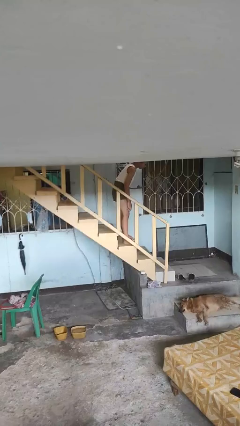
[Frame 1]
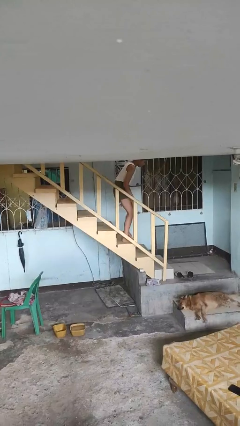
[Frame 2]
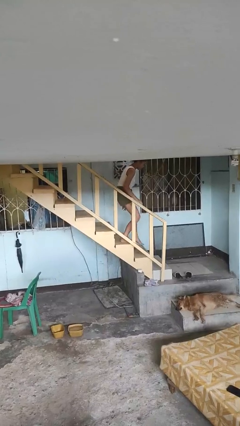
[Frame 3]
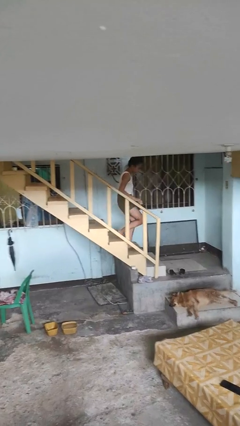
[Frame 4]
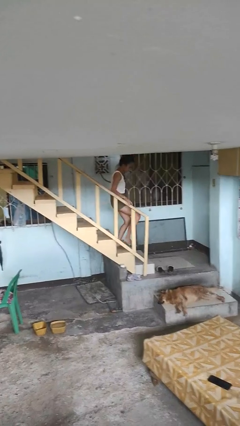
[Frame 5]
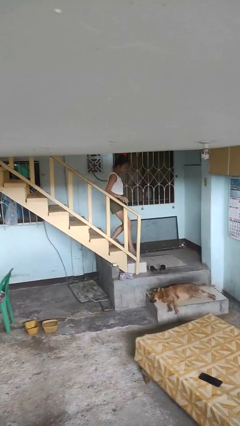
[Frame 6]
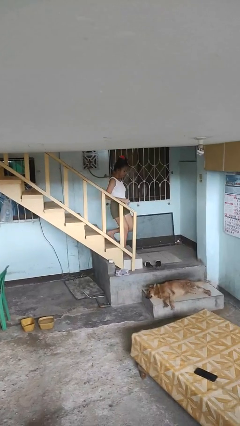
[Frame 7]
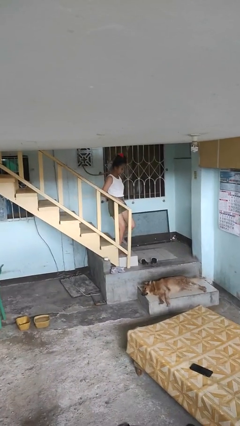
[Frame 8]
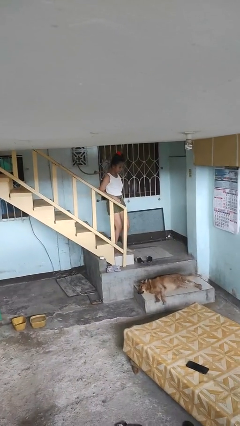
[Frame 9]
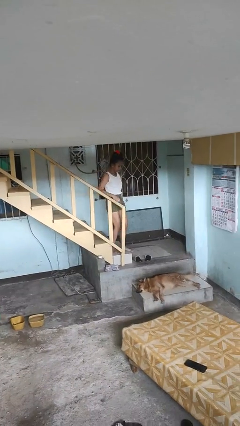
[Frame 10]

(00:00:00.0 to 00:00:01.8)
person climbs down stairs

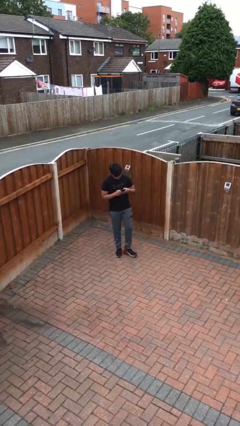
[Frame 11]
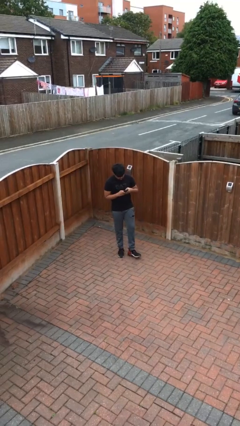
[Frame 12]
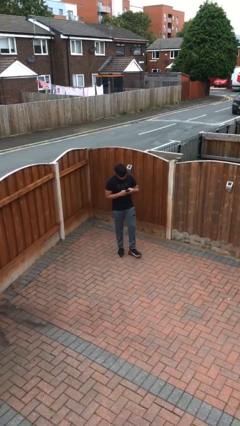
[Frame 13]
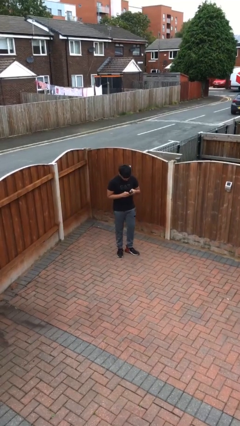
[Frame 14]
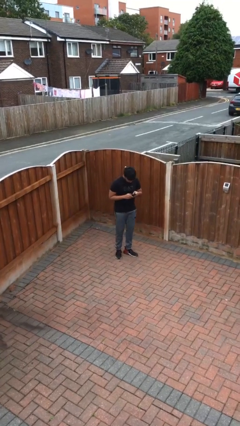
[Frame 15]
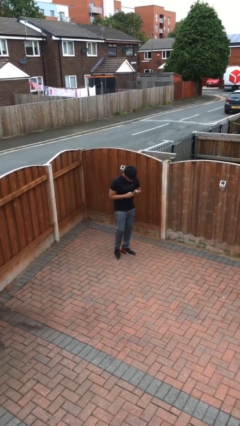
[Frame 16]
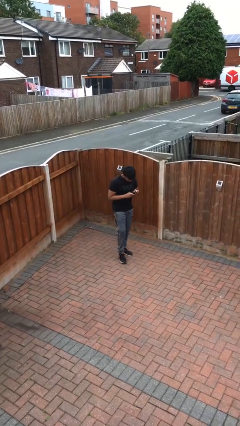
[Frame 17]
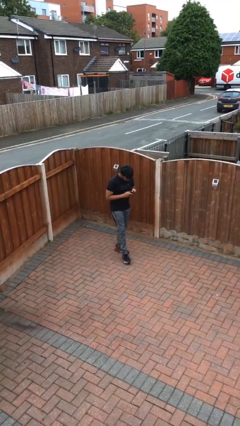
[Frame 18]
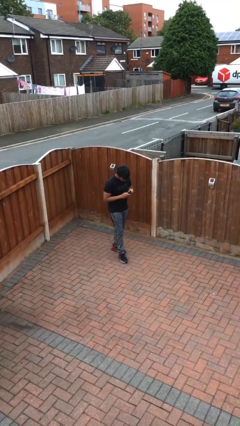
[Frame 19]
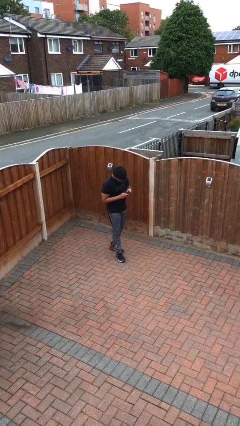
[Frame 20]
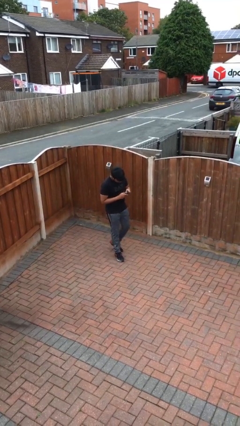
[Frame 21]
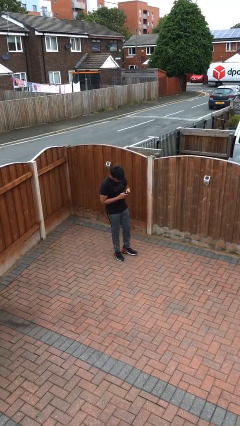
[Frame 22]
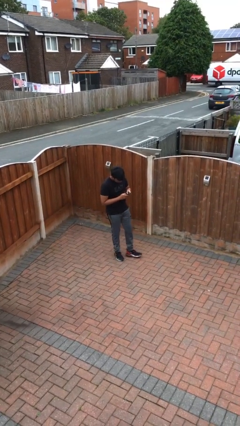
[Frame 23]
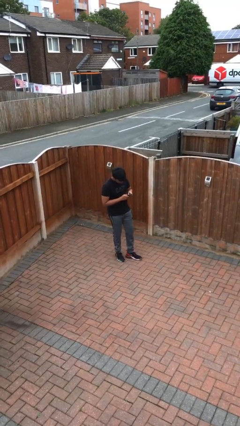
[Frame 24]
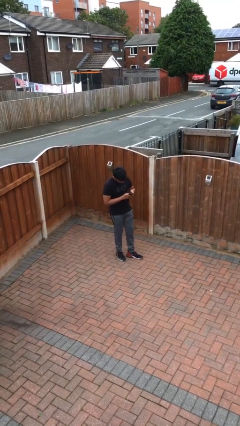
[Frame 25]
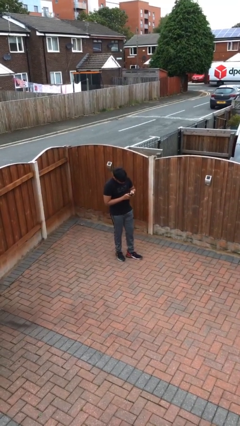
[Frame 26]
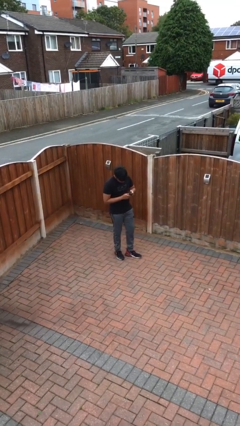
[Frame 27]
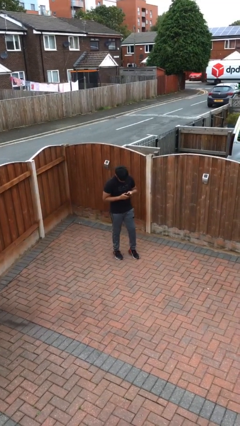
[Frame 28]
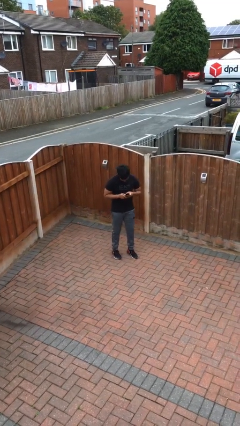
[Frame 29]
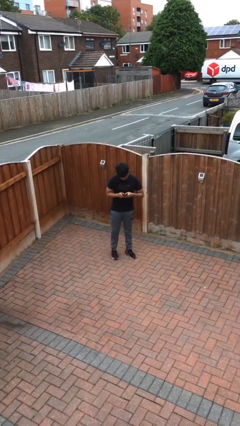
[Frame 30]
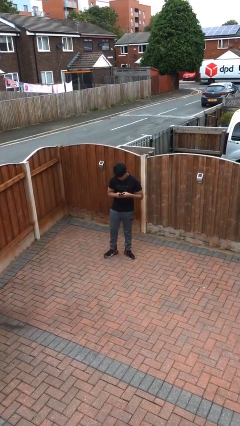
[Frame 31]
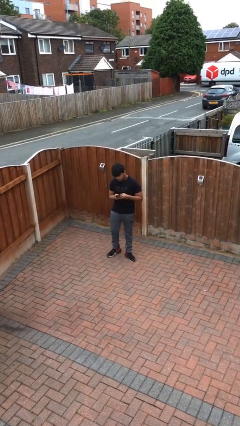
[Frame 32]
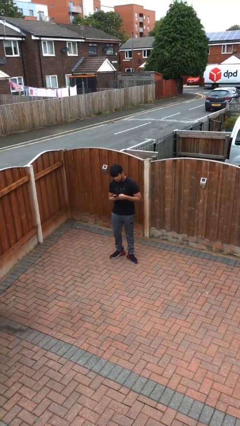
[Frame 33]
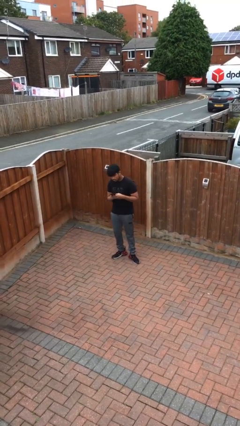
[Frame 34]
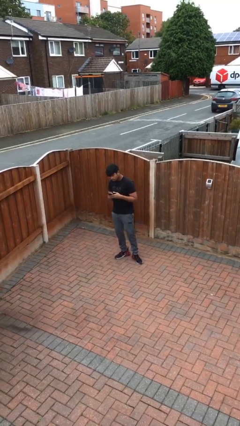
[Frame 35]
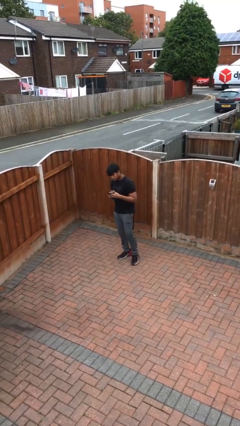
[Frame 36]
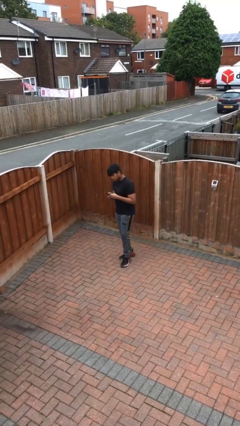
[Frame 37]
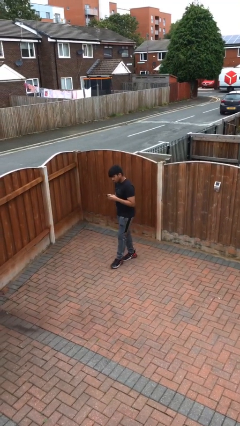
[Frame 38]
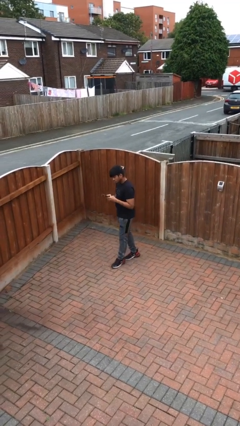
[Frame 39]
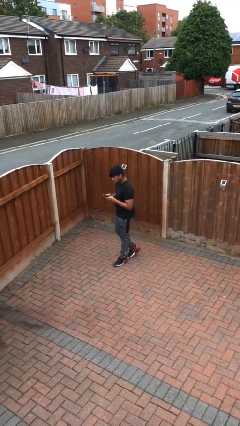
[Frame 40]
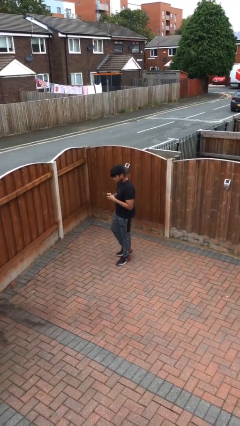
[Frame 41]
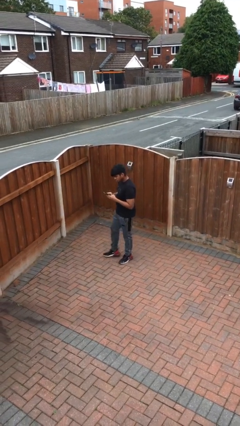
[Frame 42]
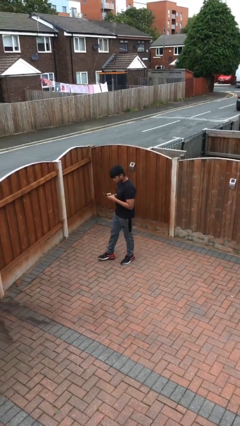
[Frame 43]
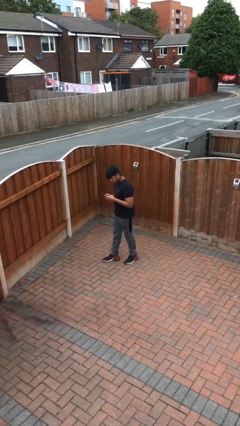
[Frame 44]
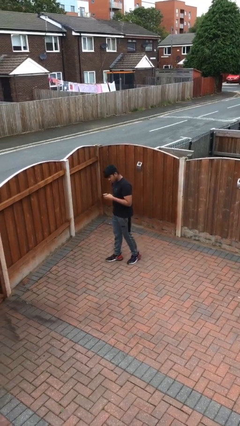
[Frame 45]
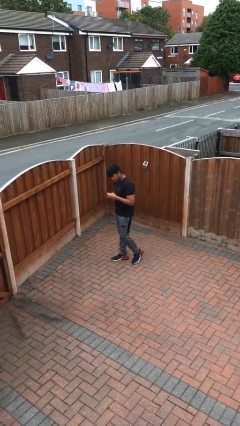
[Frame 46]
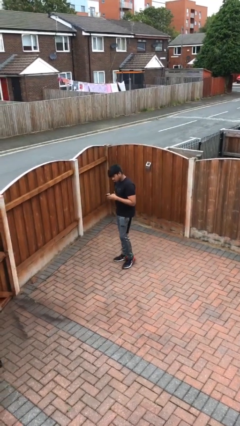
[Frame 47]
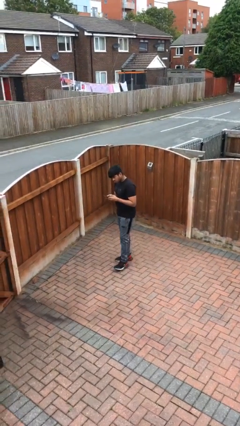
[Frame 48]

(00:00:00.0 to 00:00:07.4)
person texts on phone

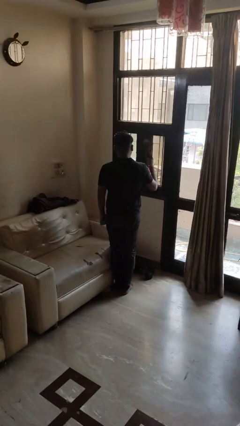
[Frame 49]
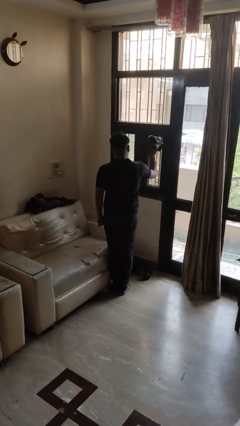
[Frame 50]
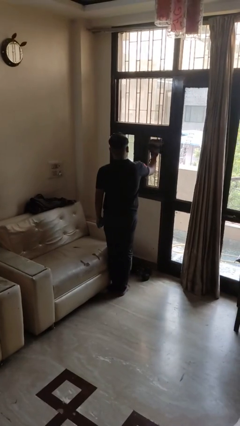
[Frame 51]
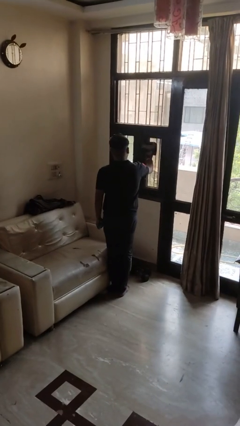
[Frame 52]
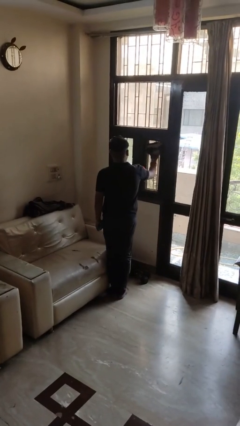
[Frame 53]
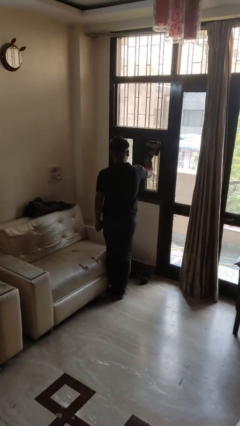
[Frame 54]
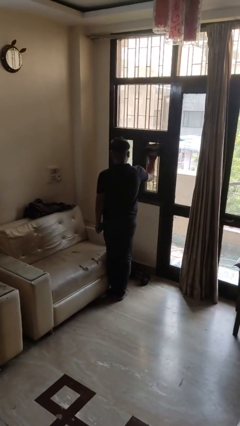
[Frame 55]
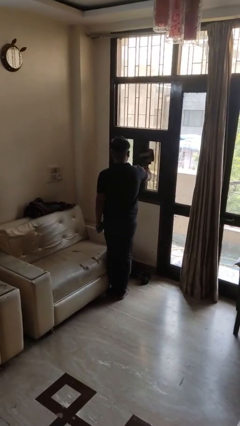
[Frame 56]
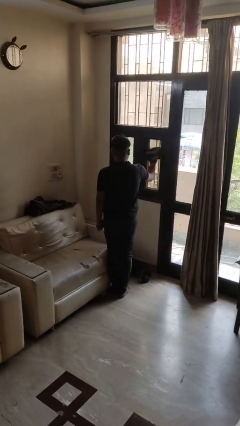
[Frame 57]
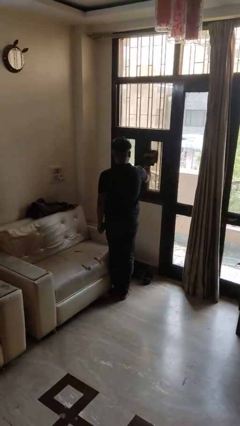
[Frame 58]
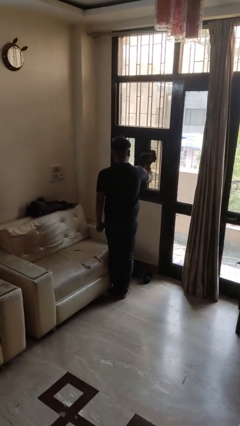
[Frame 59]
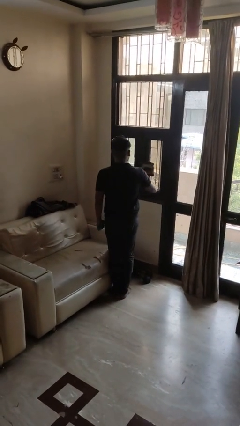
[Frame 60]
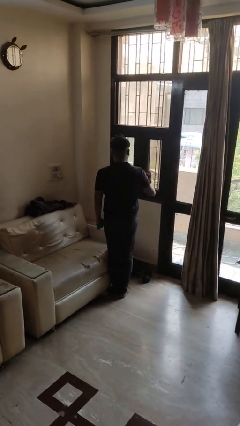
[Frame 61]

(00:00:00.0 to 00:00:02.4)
person washes window

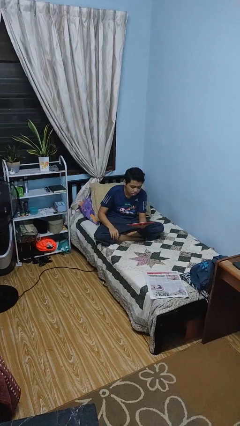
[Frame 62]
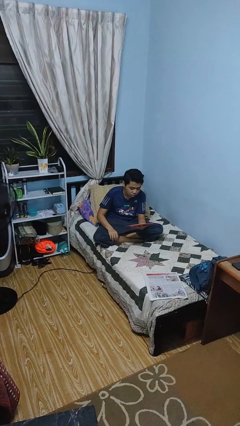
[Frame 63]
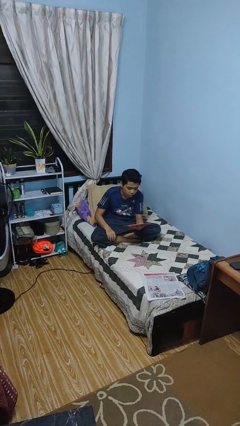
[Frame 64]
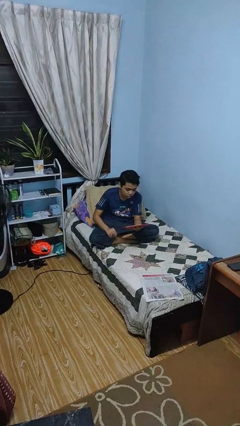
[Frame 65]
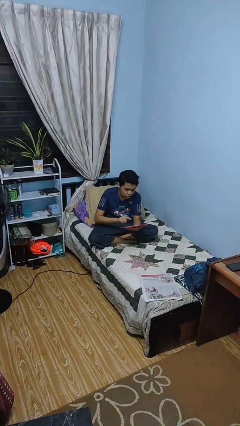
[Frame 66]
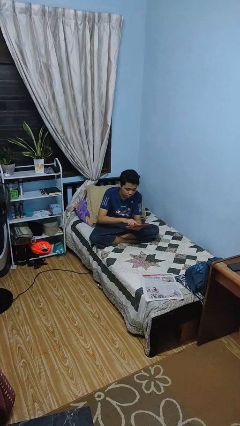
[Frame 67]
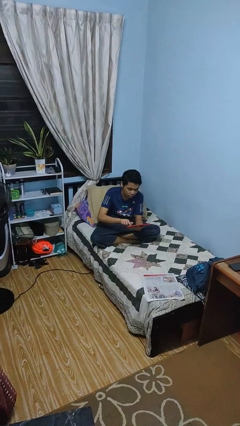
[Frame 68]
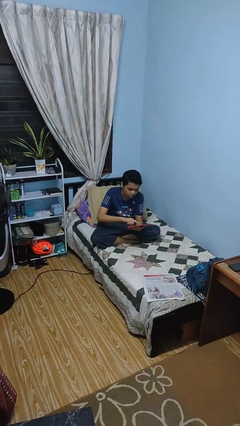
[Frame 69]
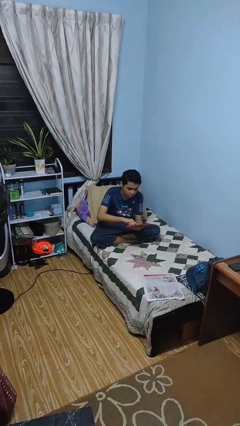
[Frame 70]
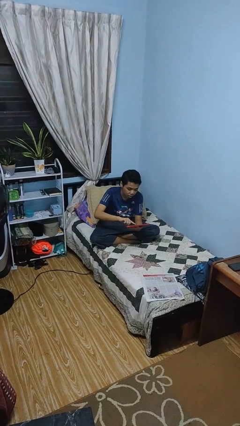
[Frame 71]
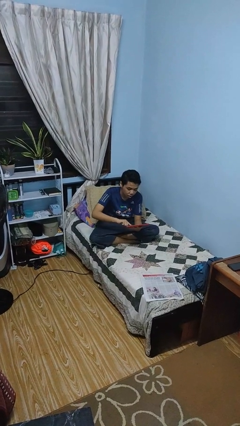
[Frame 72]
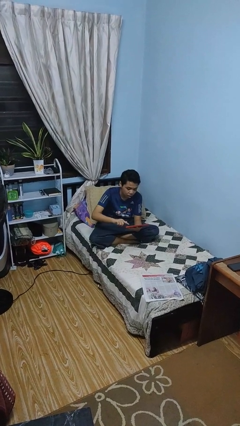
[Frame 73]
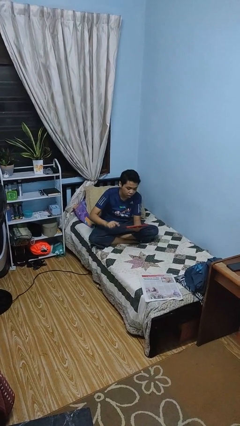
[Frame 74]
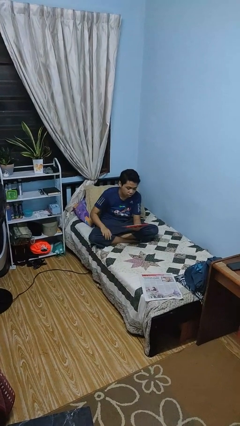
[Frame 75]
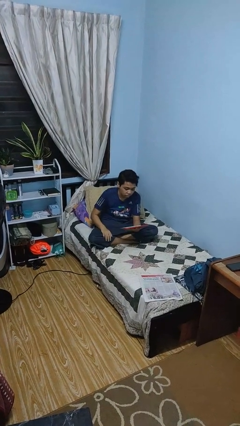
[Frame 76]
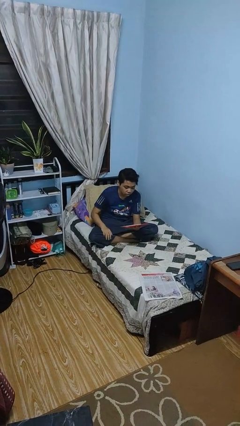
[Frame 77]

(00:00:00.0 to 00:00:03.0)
person interacts with tablet

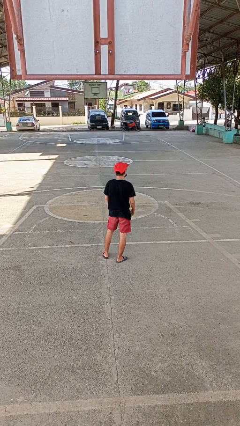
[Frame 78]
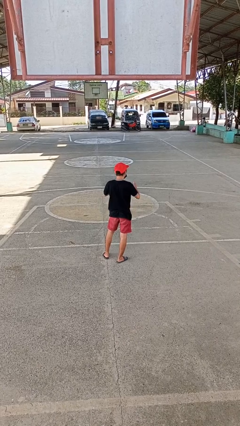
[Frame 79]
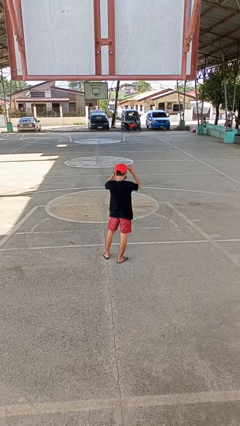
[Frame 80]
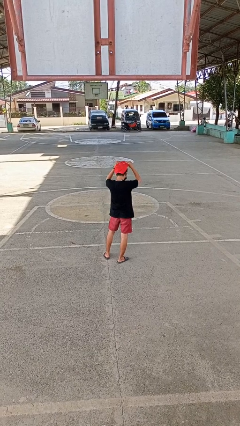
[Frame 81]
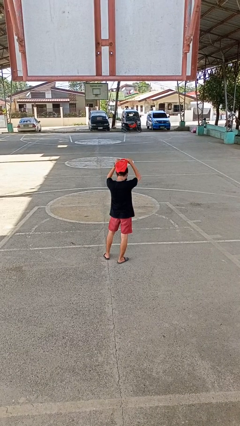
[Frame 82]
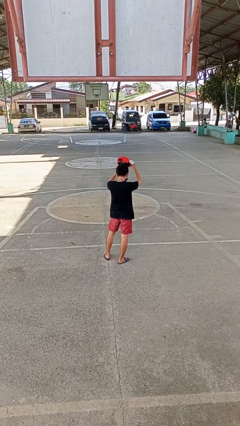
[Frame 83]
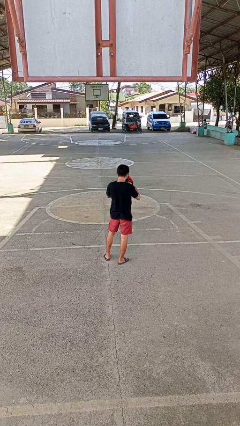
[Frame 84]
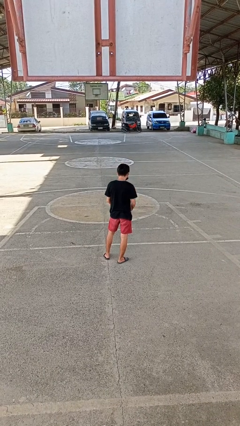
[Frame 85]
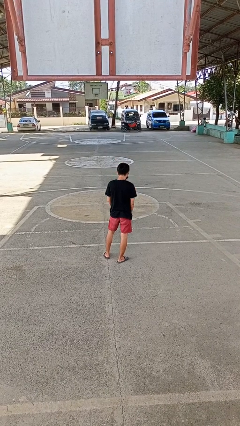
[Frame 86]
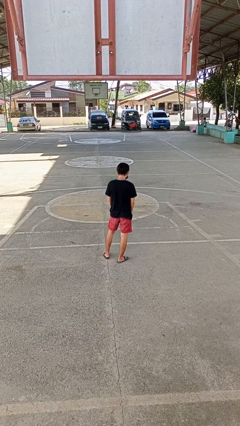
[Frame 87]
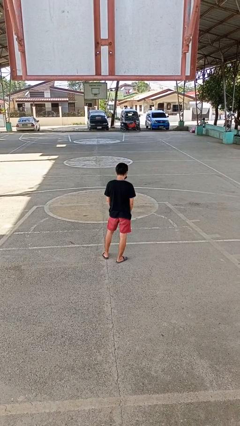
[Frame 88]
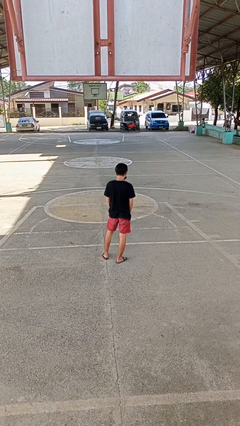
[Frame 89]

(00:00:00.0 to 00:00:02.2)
person takes off hat

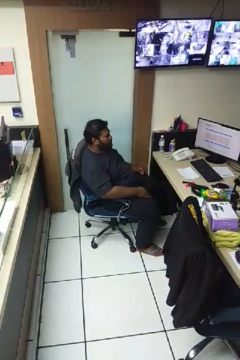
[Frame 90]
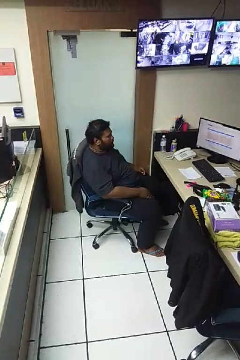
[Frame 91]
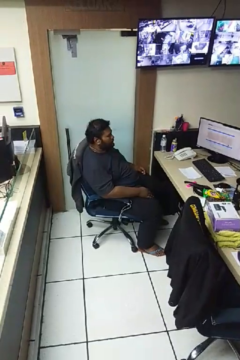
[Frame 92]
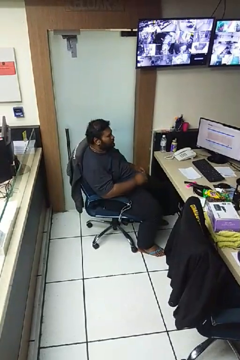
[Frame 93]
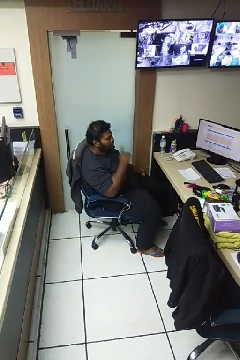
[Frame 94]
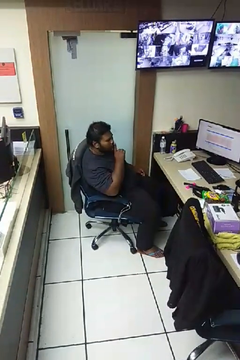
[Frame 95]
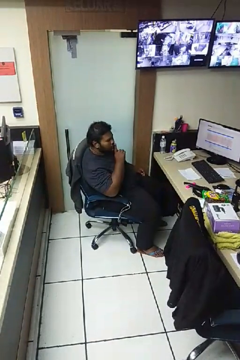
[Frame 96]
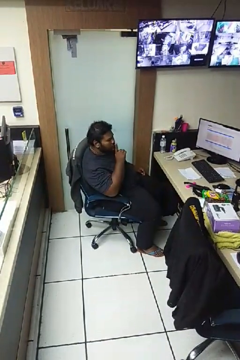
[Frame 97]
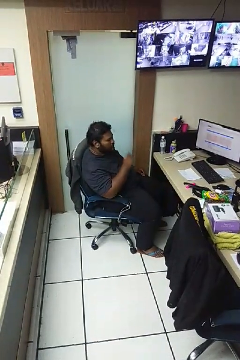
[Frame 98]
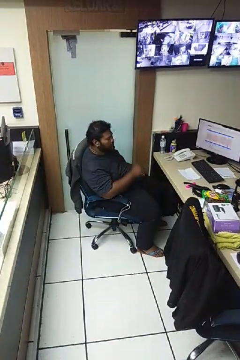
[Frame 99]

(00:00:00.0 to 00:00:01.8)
person gestures be quiet
